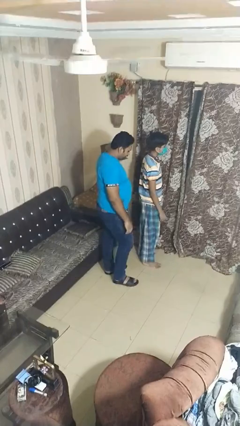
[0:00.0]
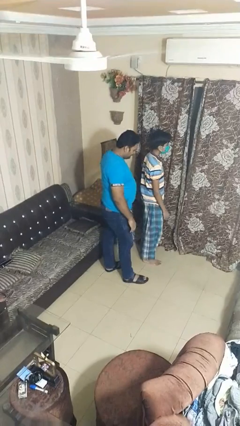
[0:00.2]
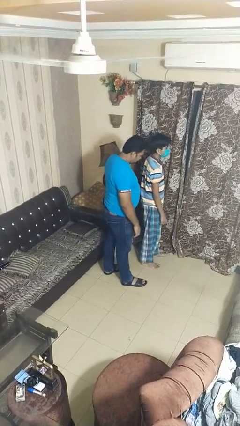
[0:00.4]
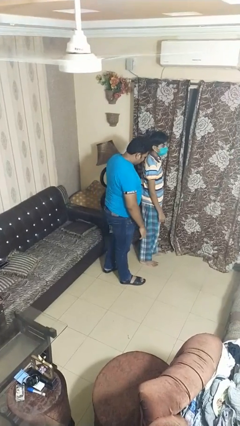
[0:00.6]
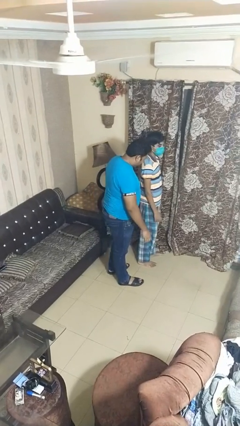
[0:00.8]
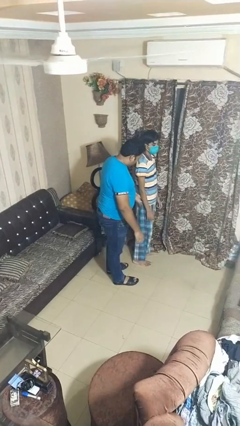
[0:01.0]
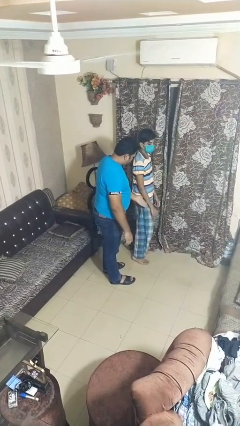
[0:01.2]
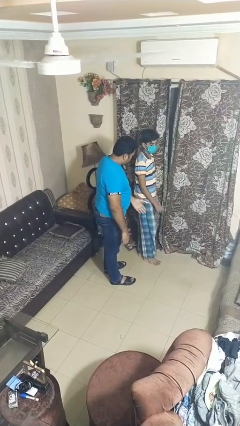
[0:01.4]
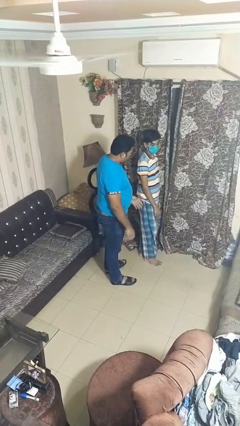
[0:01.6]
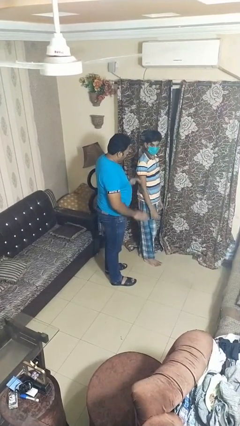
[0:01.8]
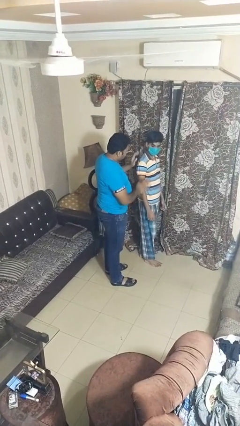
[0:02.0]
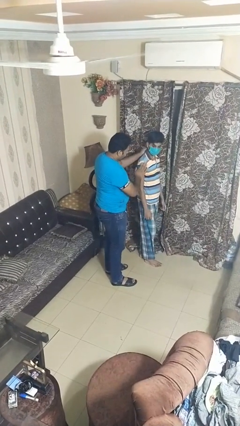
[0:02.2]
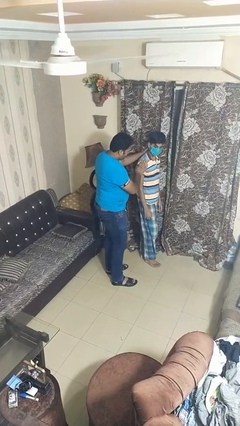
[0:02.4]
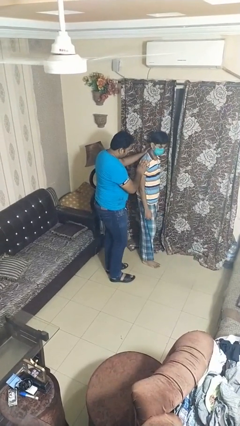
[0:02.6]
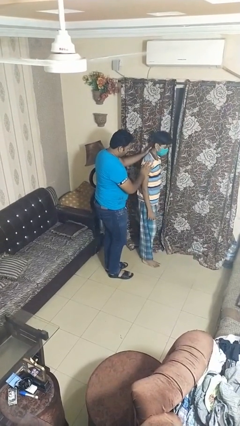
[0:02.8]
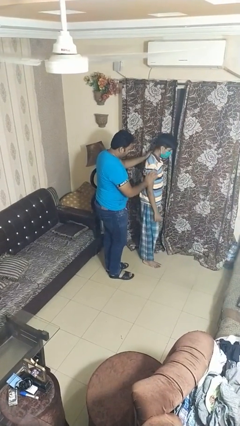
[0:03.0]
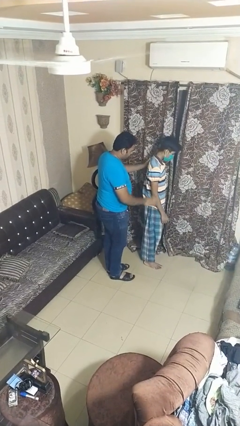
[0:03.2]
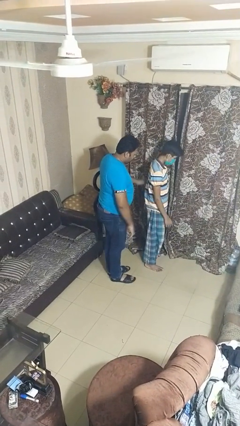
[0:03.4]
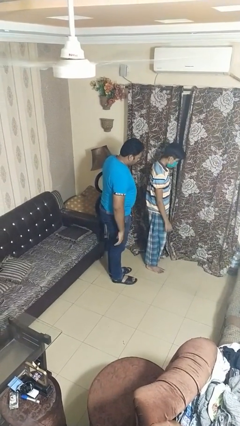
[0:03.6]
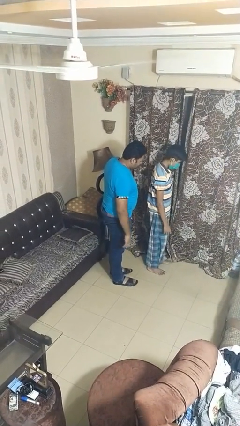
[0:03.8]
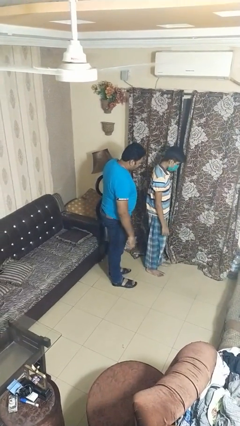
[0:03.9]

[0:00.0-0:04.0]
person bumps into person

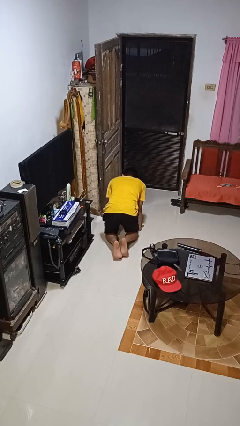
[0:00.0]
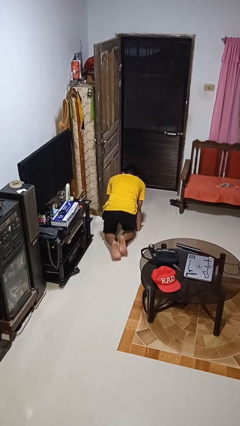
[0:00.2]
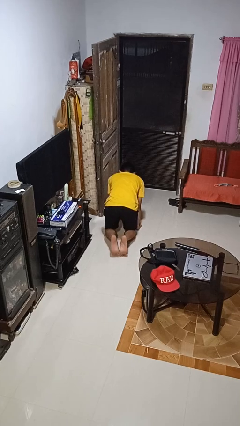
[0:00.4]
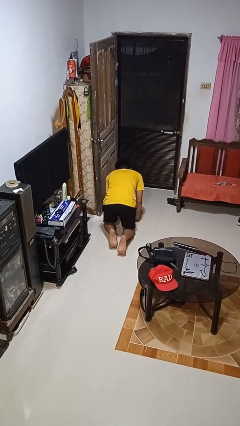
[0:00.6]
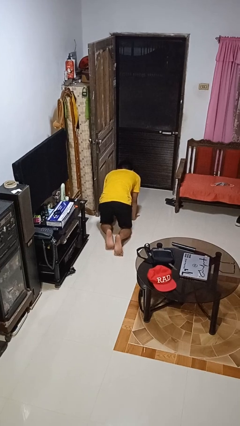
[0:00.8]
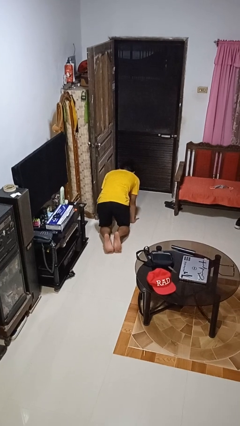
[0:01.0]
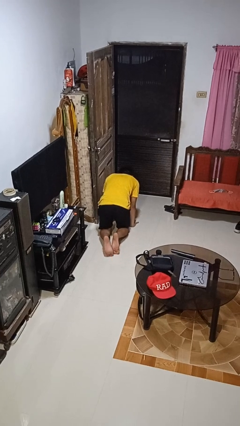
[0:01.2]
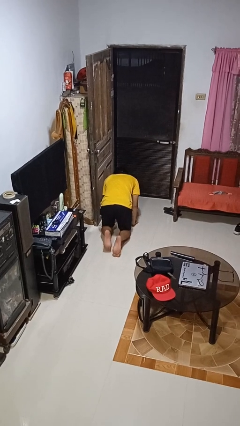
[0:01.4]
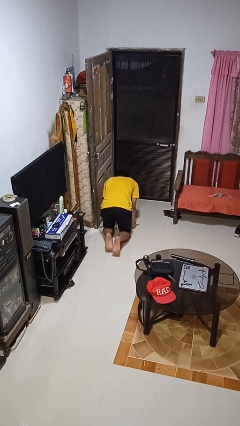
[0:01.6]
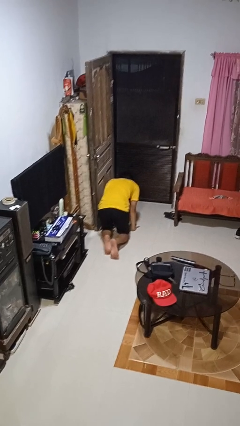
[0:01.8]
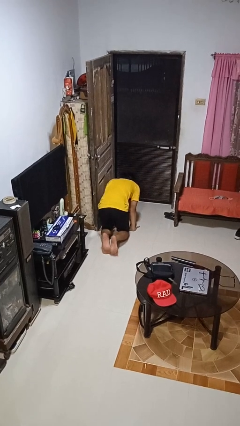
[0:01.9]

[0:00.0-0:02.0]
person crawls

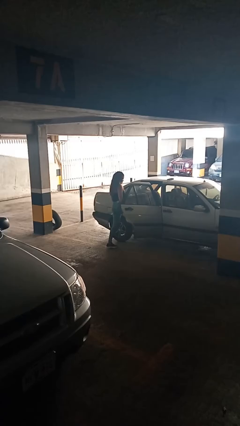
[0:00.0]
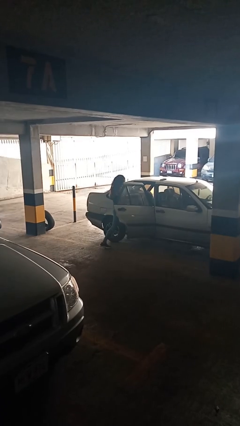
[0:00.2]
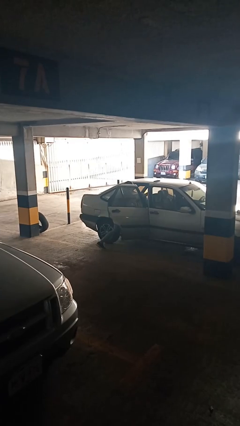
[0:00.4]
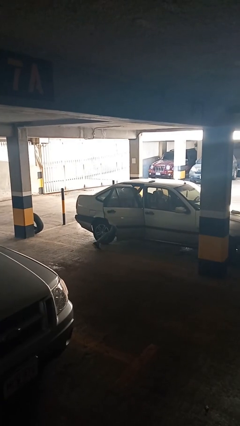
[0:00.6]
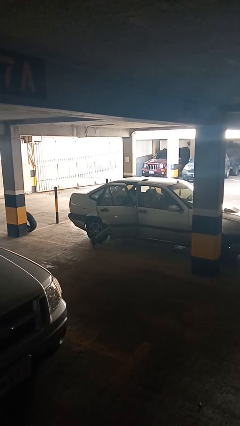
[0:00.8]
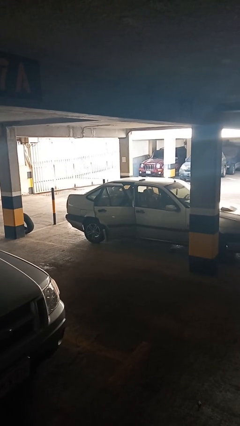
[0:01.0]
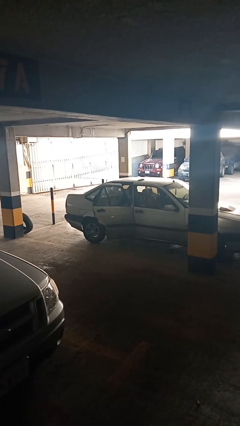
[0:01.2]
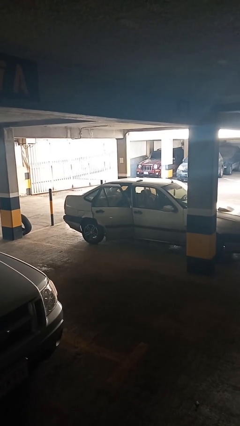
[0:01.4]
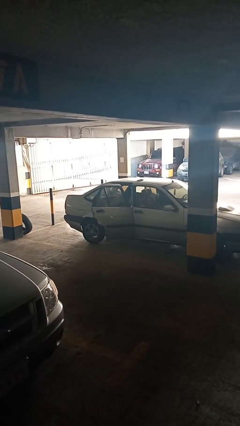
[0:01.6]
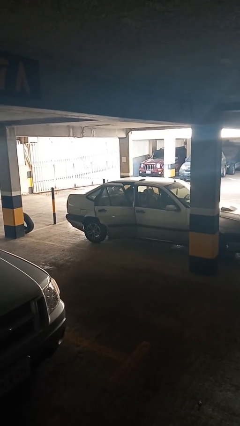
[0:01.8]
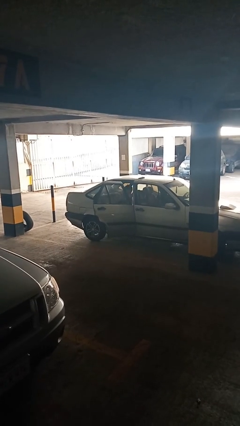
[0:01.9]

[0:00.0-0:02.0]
person enters car

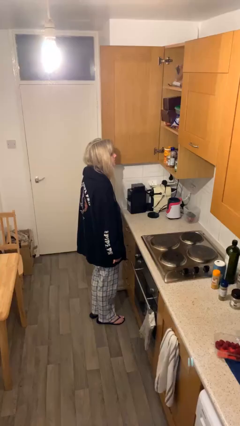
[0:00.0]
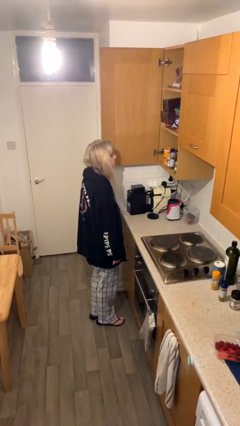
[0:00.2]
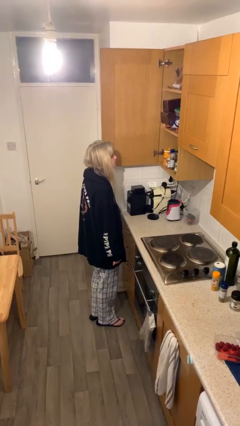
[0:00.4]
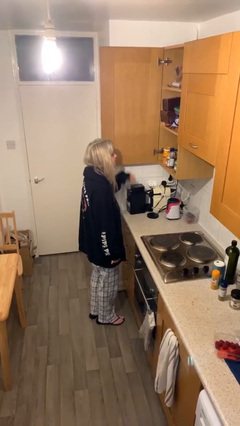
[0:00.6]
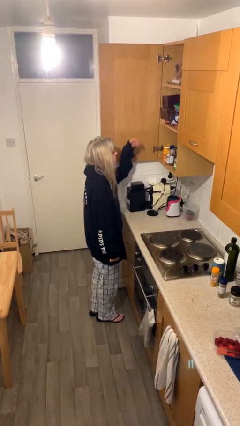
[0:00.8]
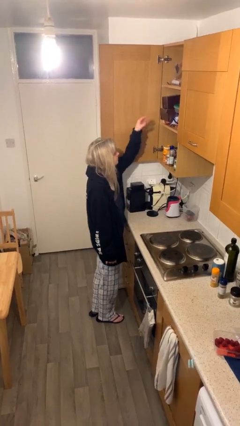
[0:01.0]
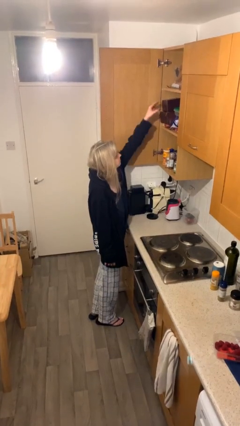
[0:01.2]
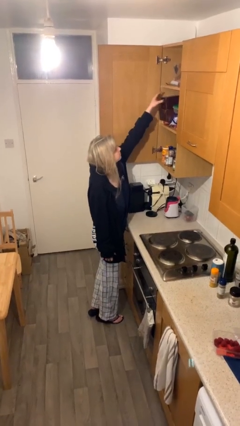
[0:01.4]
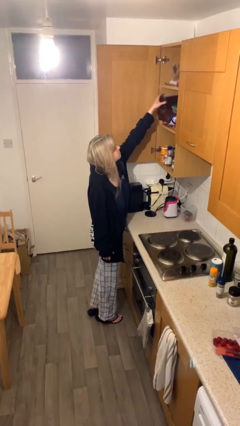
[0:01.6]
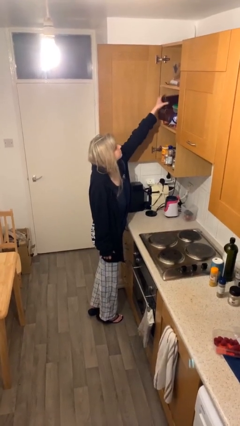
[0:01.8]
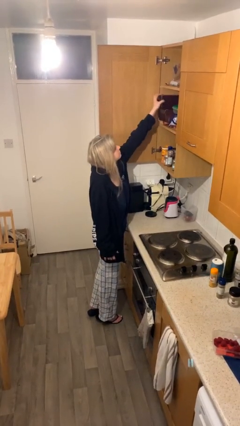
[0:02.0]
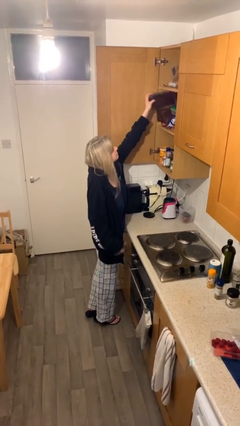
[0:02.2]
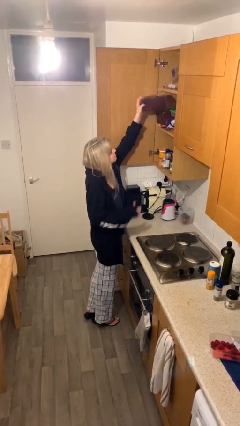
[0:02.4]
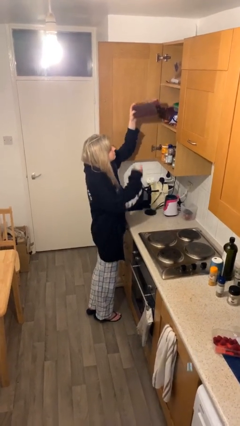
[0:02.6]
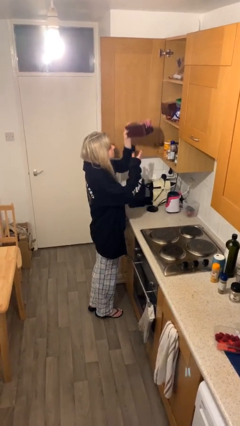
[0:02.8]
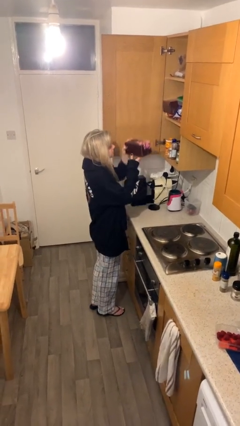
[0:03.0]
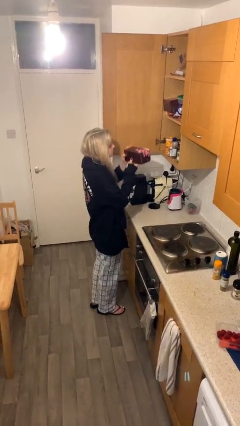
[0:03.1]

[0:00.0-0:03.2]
person picks up object from shelf

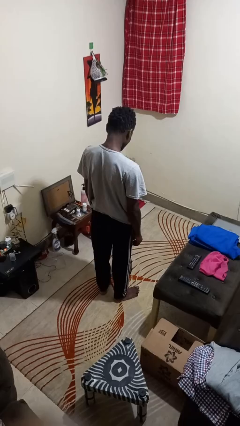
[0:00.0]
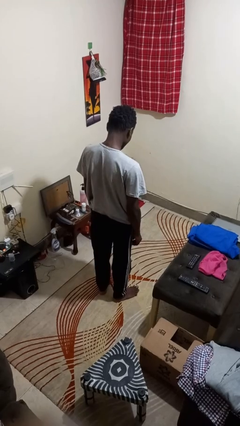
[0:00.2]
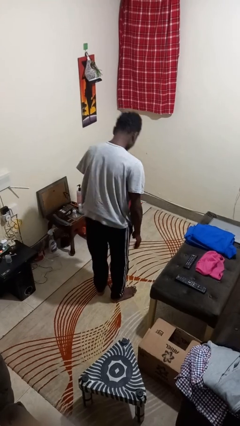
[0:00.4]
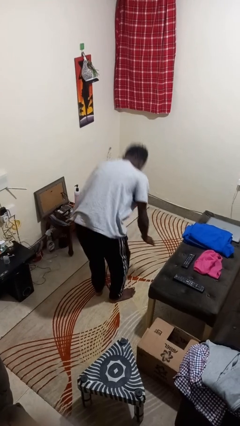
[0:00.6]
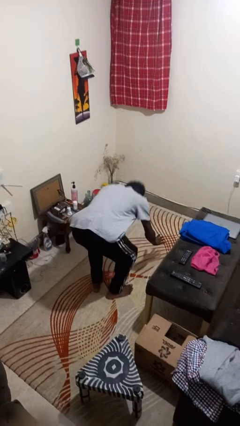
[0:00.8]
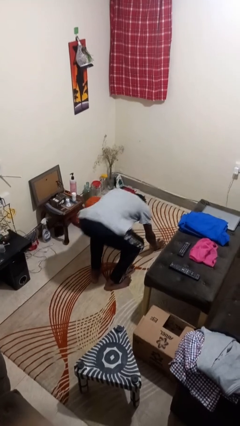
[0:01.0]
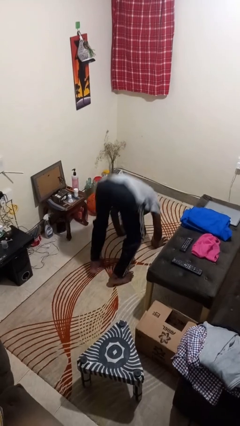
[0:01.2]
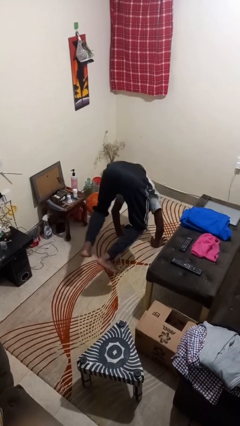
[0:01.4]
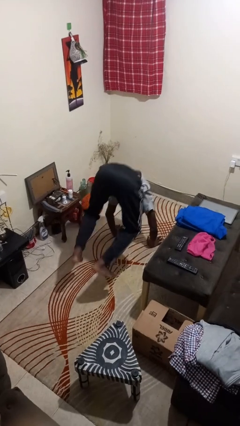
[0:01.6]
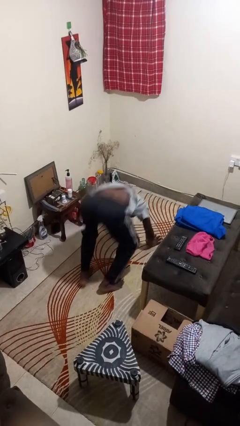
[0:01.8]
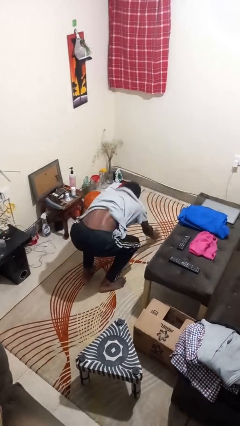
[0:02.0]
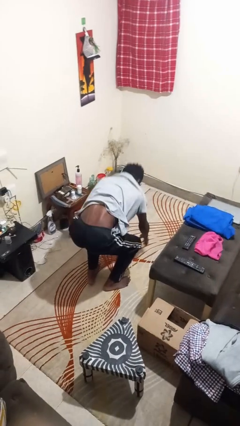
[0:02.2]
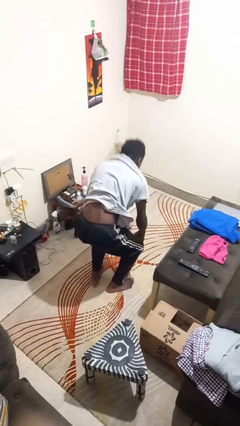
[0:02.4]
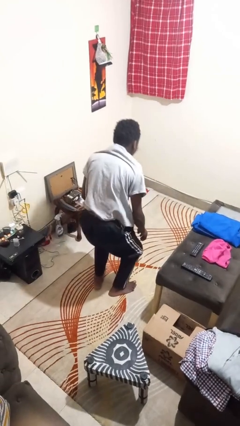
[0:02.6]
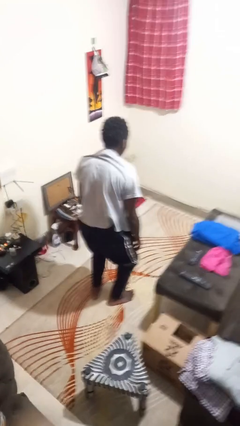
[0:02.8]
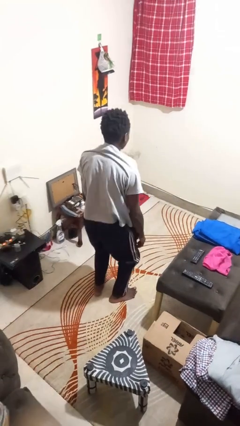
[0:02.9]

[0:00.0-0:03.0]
person handstand

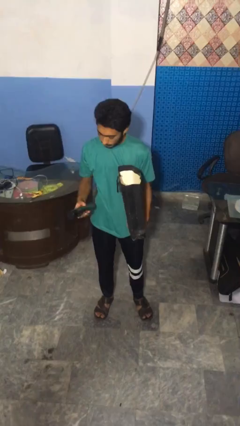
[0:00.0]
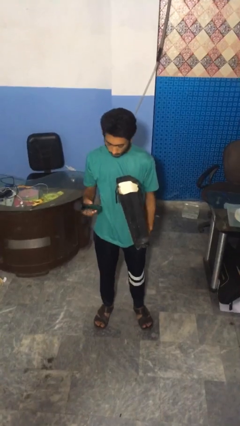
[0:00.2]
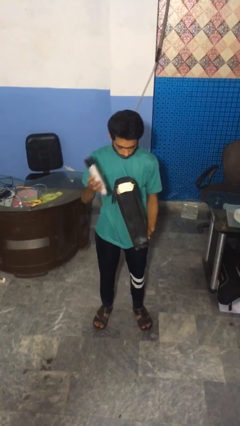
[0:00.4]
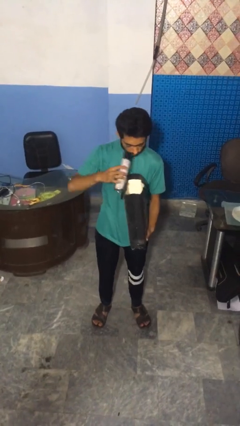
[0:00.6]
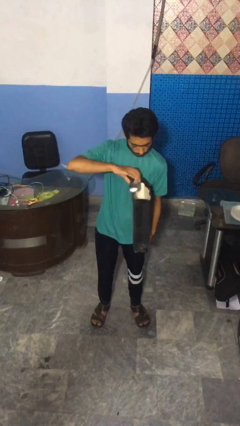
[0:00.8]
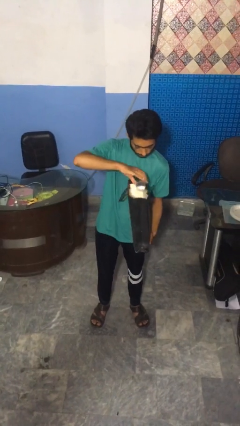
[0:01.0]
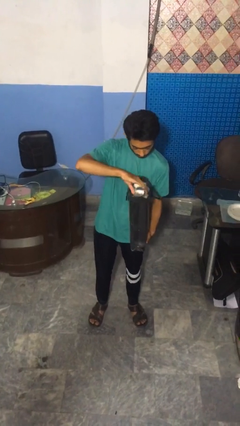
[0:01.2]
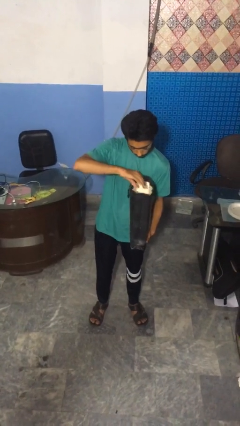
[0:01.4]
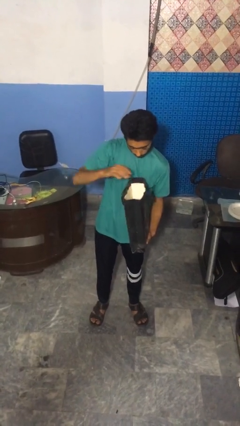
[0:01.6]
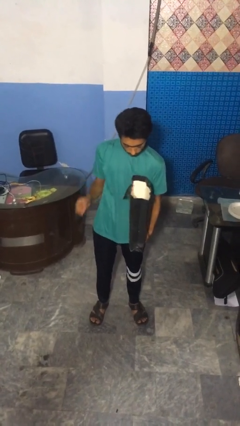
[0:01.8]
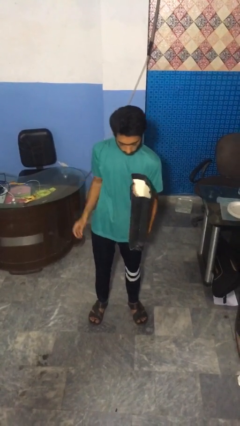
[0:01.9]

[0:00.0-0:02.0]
person puts object into bag

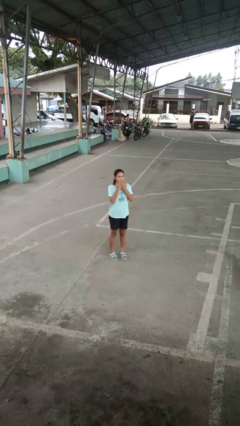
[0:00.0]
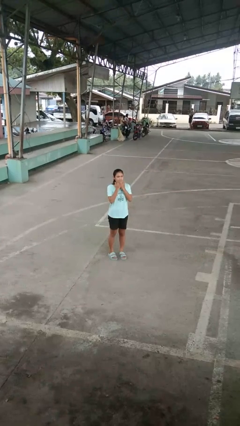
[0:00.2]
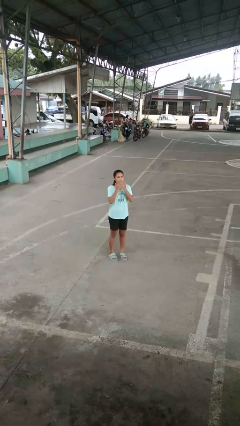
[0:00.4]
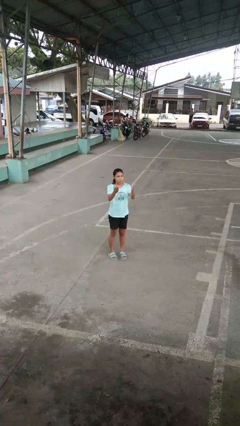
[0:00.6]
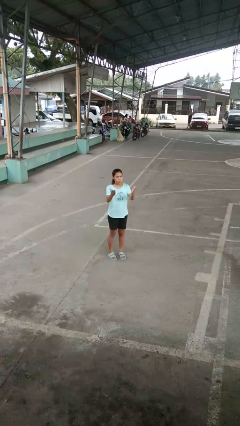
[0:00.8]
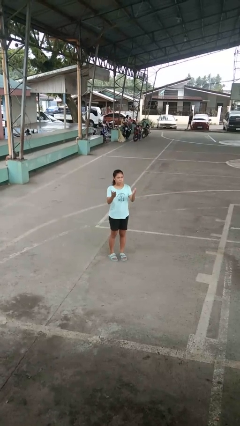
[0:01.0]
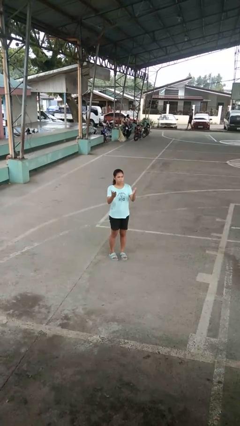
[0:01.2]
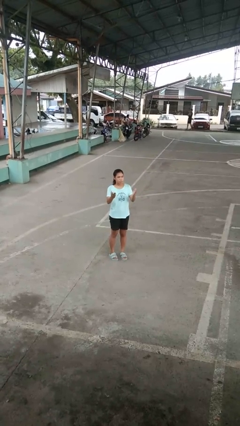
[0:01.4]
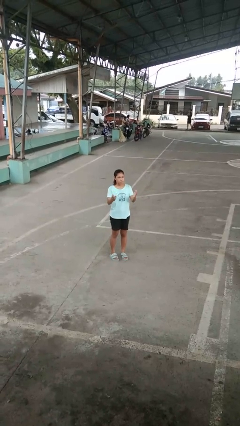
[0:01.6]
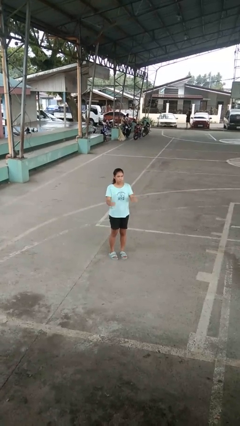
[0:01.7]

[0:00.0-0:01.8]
person gestures blow kiss
